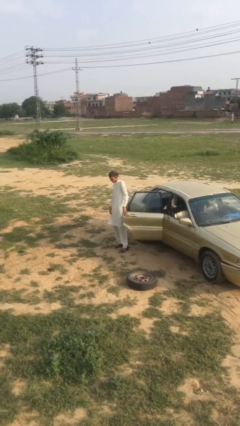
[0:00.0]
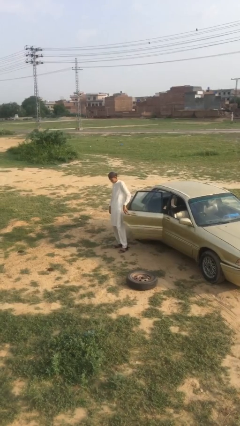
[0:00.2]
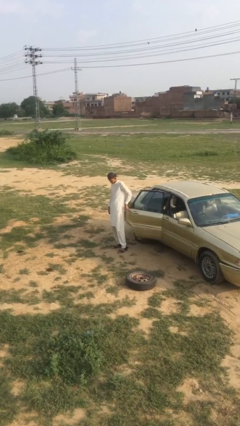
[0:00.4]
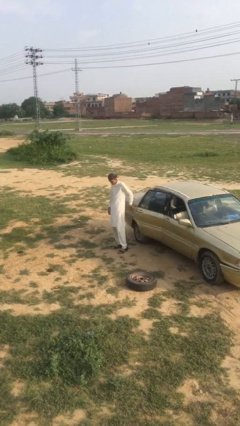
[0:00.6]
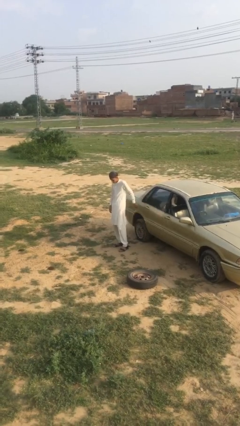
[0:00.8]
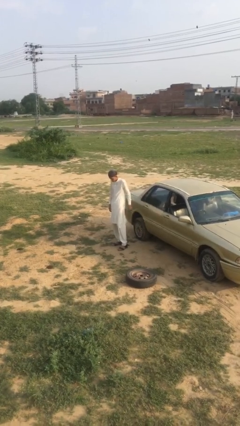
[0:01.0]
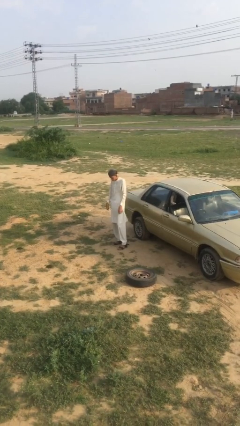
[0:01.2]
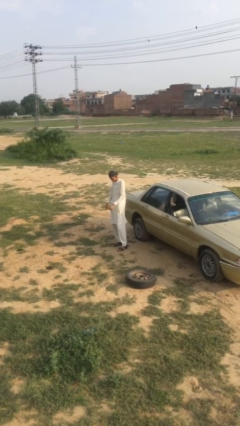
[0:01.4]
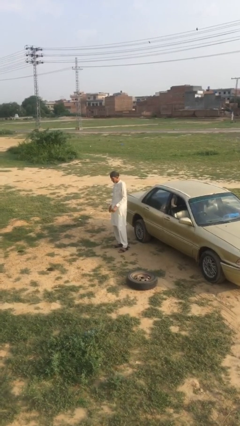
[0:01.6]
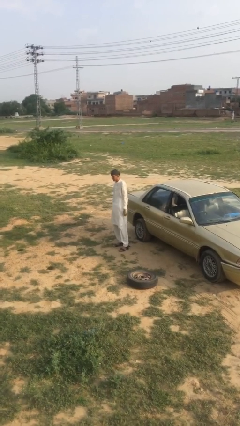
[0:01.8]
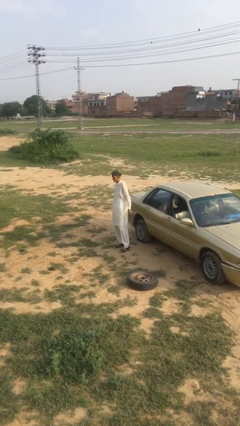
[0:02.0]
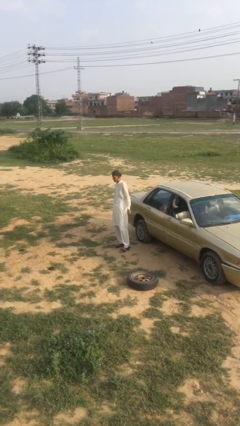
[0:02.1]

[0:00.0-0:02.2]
person closes car door

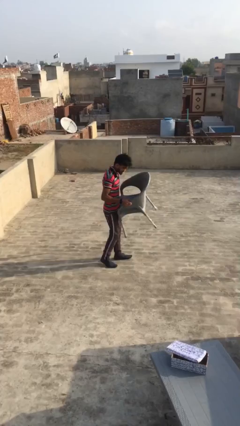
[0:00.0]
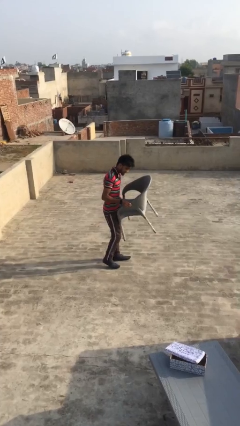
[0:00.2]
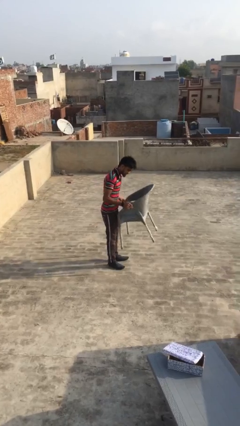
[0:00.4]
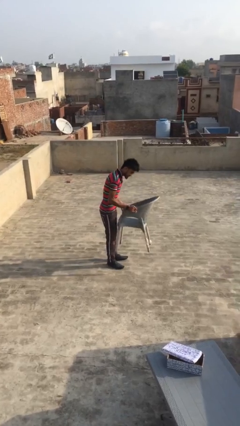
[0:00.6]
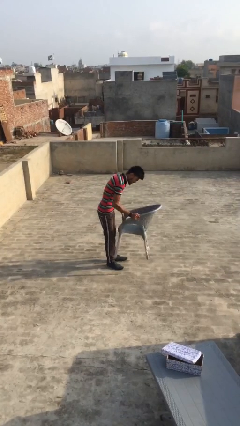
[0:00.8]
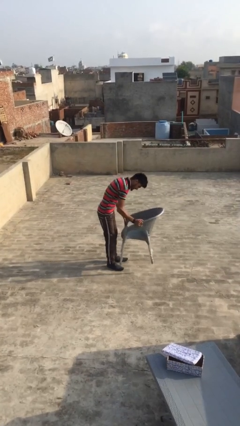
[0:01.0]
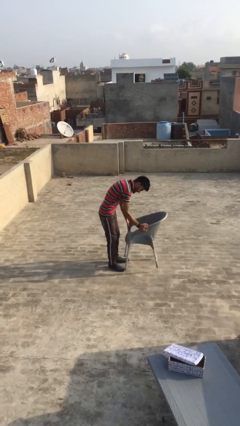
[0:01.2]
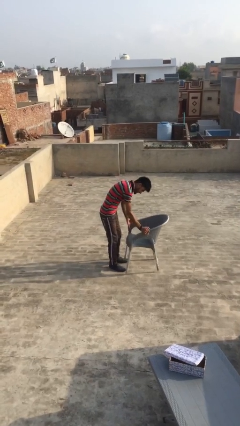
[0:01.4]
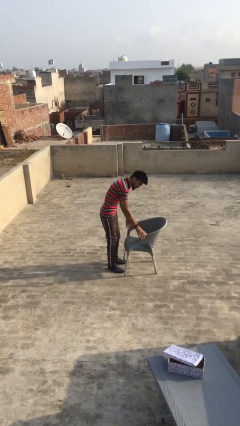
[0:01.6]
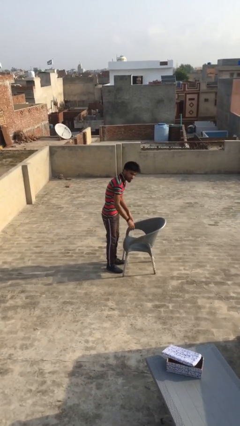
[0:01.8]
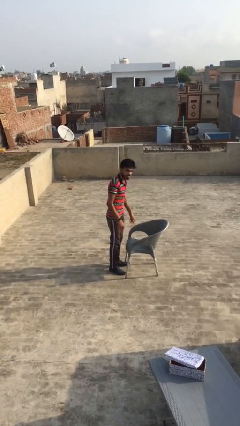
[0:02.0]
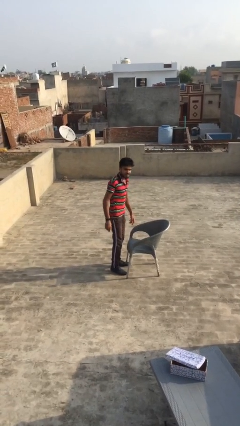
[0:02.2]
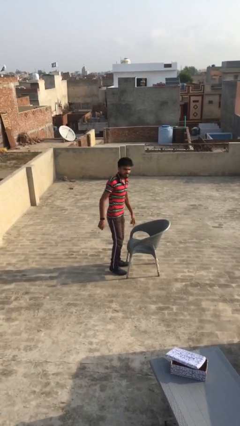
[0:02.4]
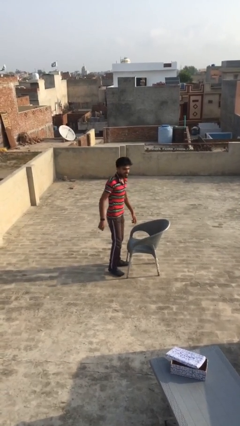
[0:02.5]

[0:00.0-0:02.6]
person puts down object on floor

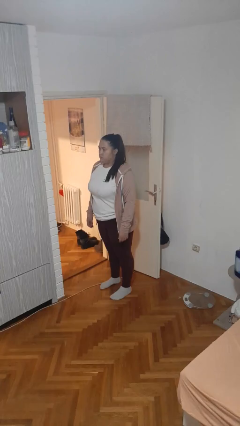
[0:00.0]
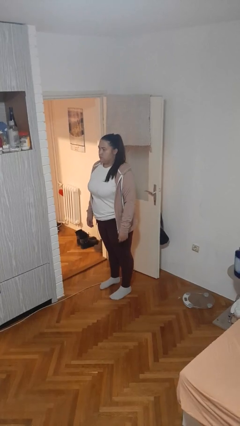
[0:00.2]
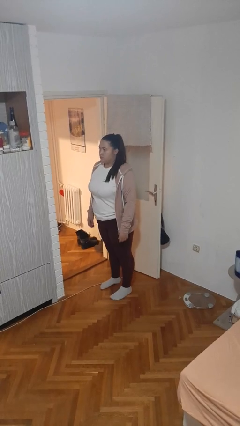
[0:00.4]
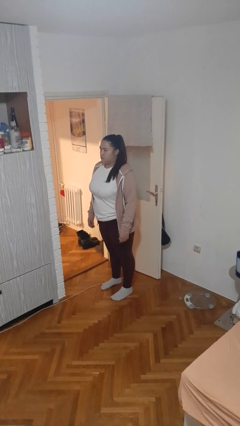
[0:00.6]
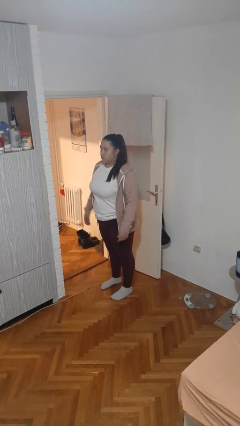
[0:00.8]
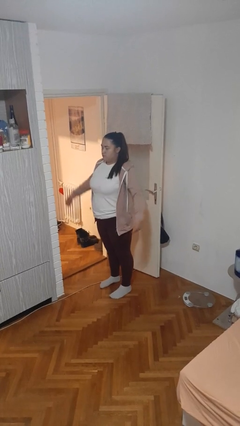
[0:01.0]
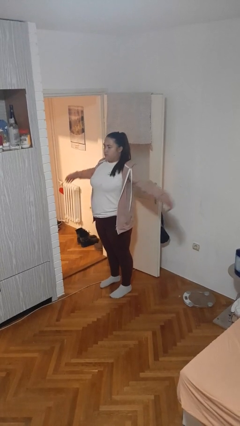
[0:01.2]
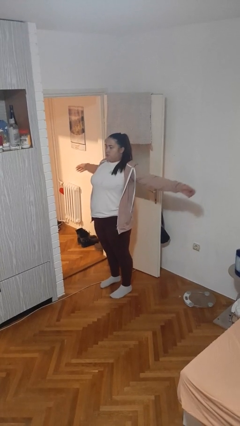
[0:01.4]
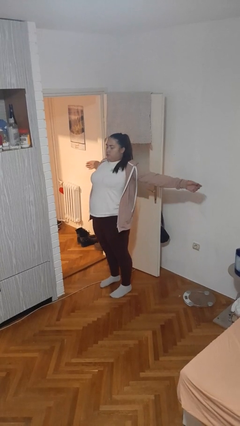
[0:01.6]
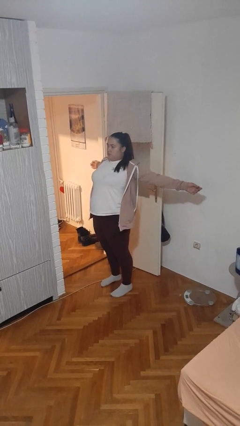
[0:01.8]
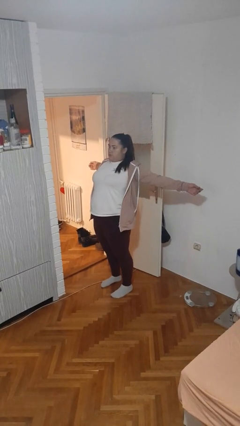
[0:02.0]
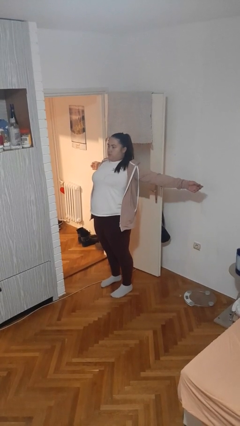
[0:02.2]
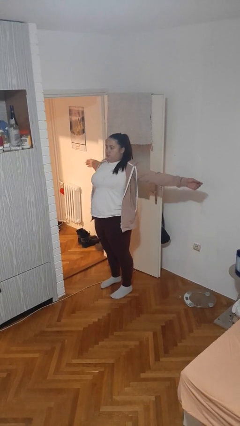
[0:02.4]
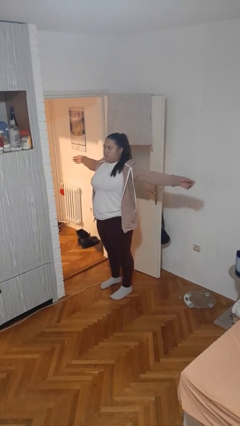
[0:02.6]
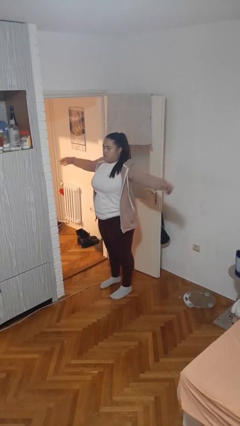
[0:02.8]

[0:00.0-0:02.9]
person stretches arms to side

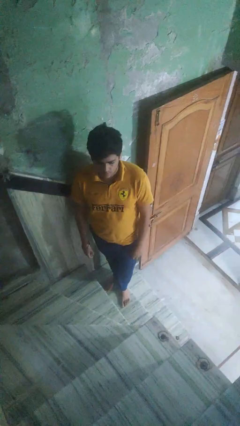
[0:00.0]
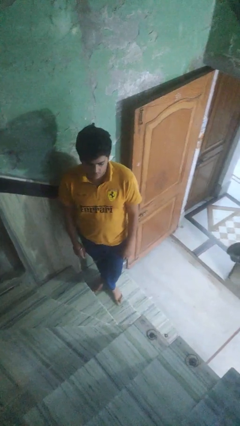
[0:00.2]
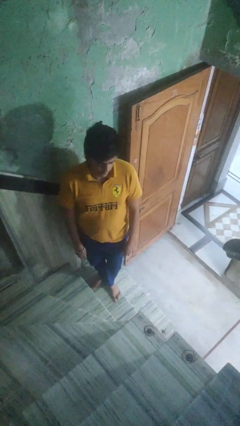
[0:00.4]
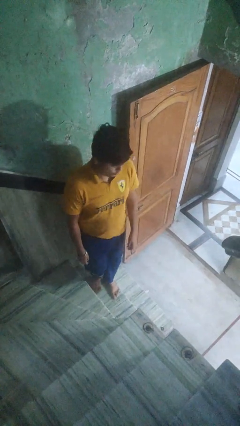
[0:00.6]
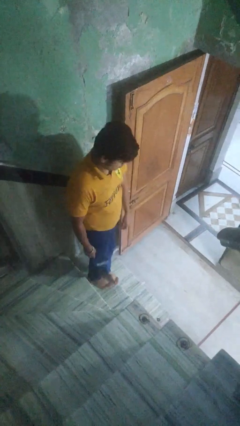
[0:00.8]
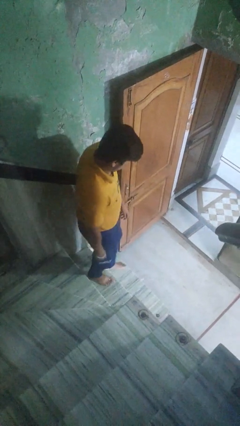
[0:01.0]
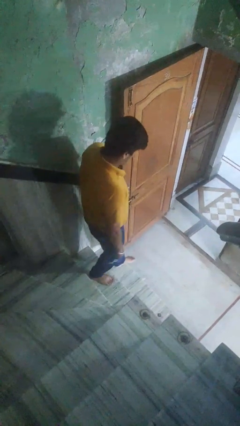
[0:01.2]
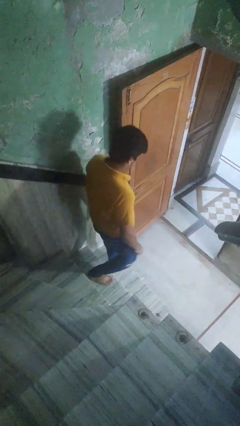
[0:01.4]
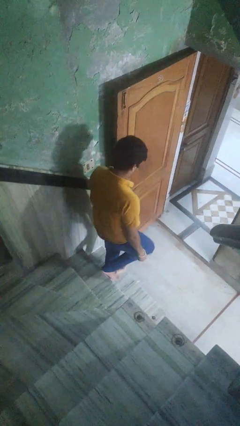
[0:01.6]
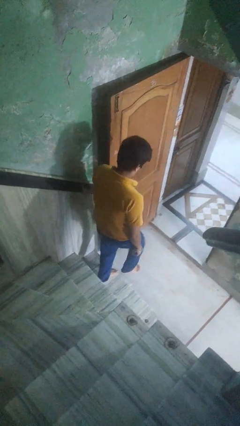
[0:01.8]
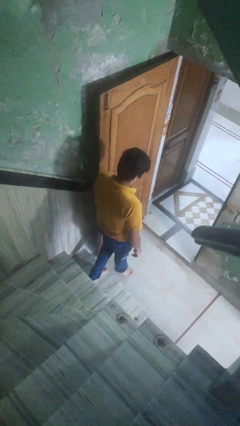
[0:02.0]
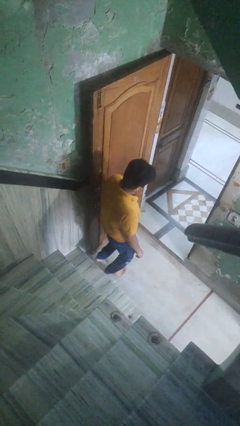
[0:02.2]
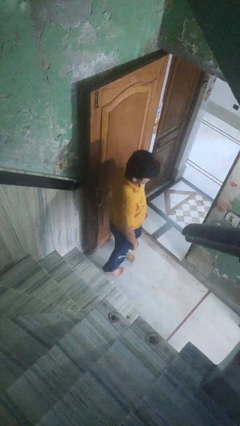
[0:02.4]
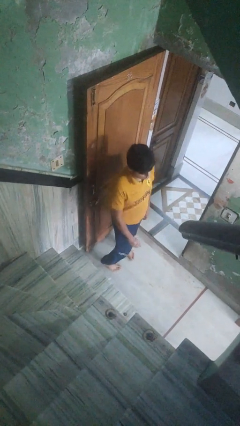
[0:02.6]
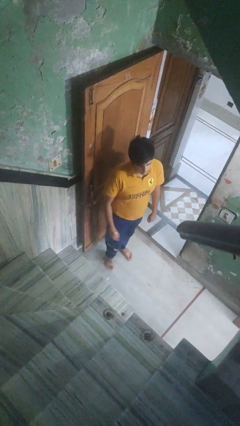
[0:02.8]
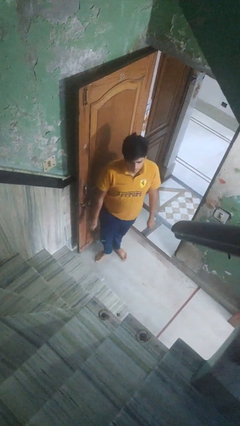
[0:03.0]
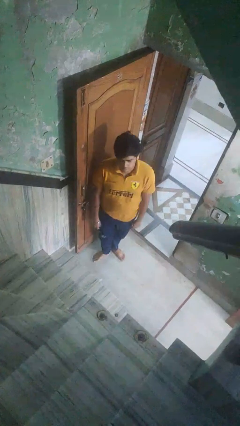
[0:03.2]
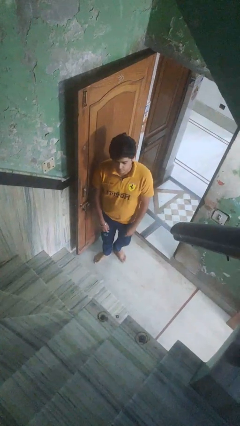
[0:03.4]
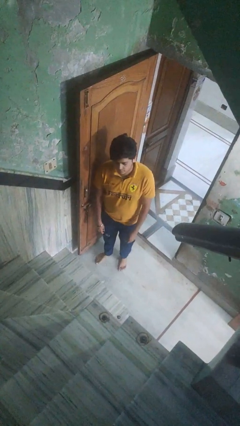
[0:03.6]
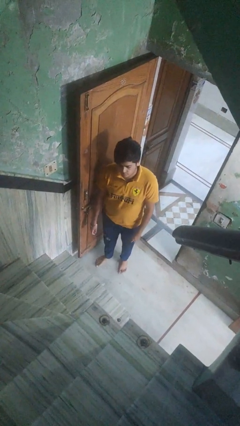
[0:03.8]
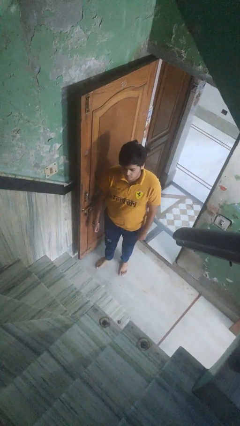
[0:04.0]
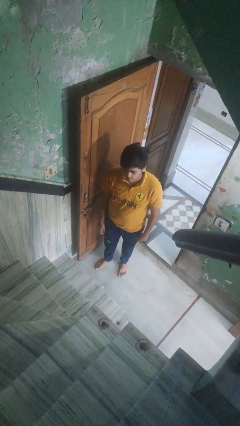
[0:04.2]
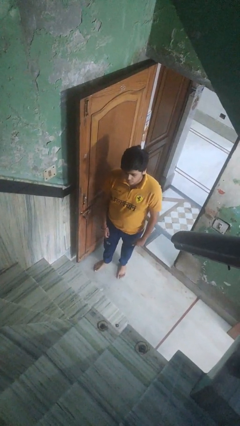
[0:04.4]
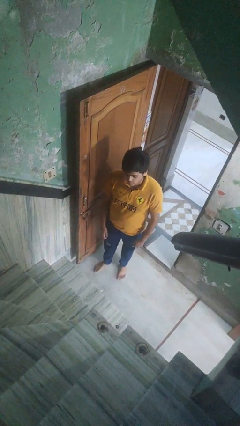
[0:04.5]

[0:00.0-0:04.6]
person climbs down stairs

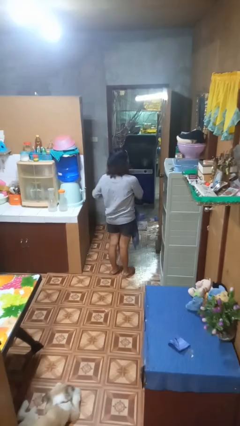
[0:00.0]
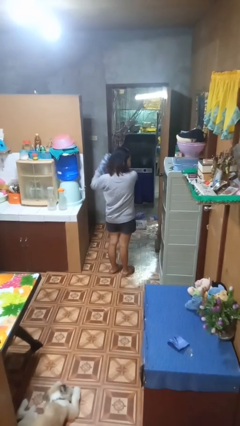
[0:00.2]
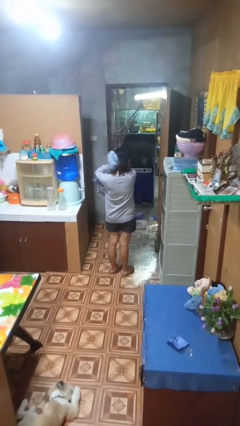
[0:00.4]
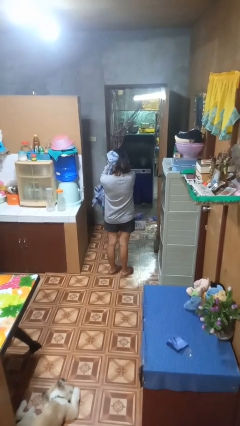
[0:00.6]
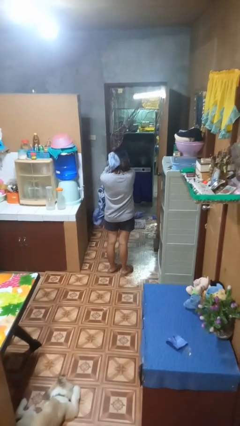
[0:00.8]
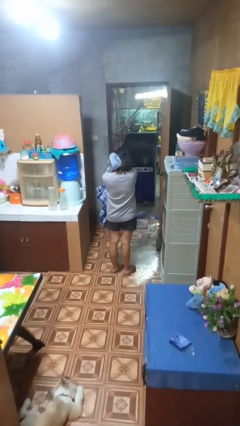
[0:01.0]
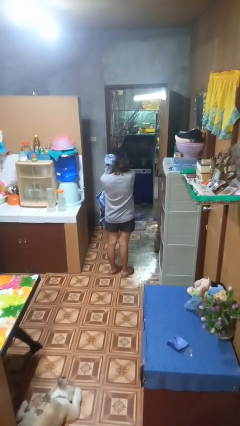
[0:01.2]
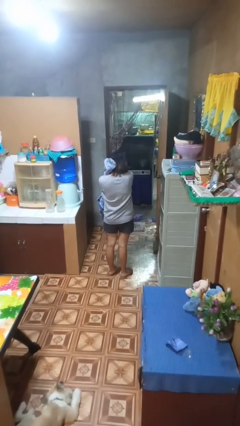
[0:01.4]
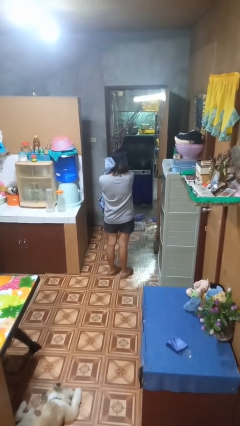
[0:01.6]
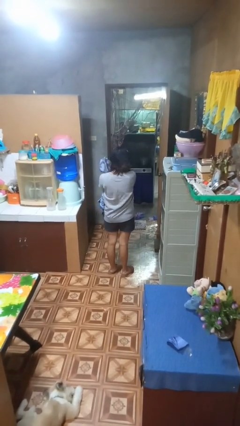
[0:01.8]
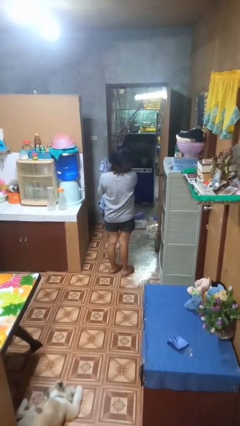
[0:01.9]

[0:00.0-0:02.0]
person dries hair with towel

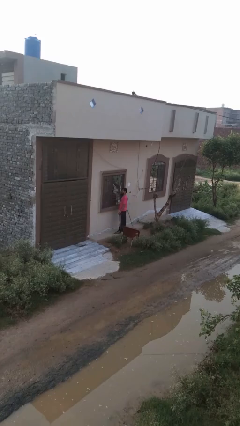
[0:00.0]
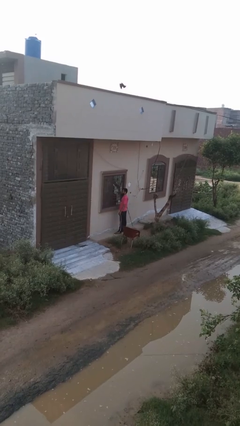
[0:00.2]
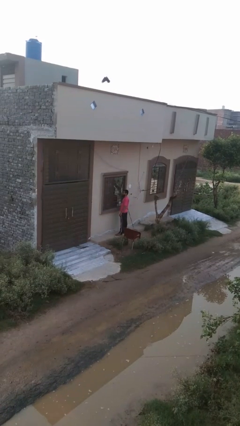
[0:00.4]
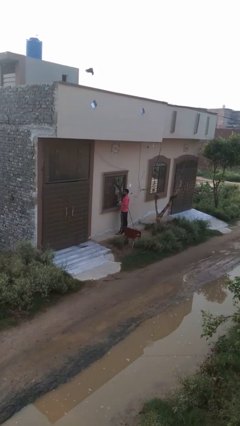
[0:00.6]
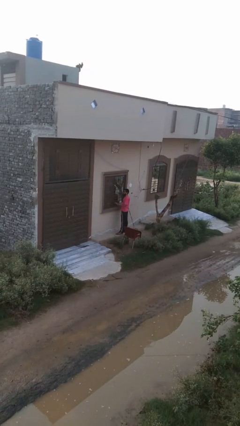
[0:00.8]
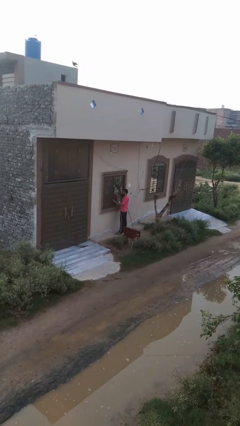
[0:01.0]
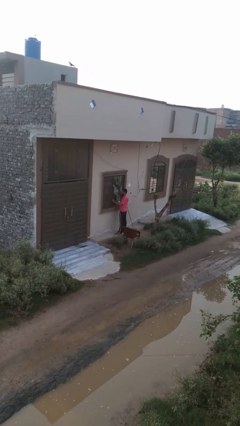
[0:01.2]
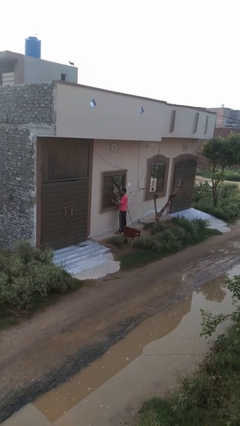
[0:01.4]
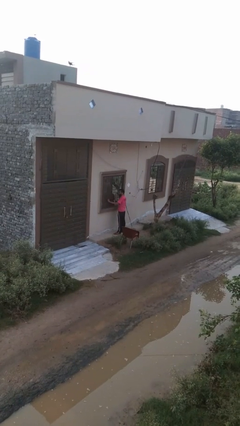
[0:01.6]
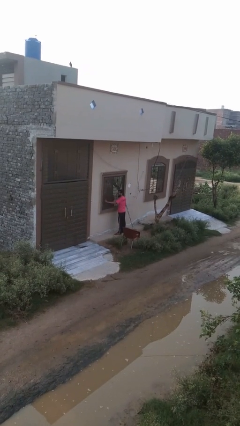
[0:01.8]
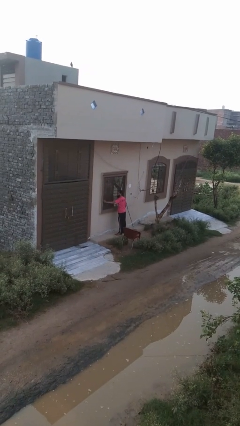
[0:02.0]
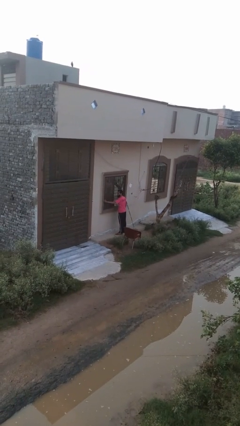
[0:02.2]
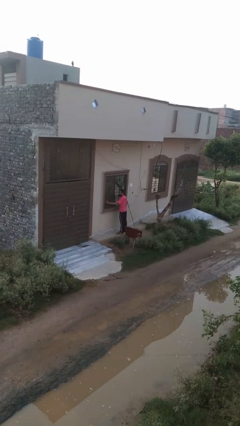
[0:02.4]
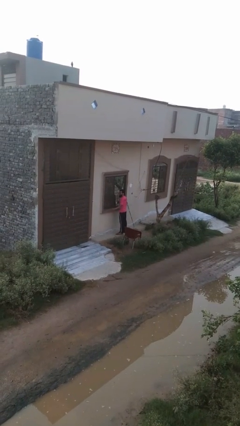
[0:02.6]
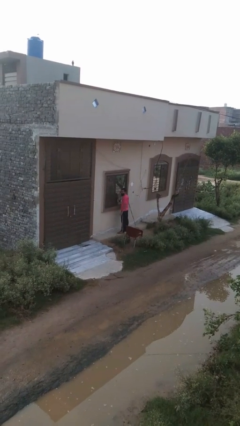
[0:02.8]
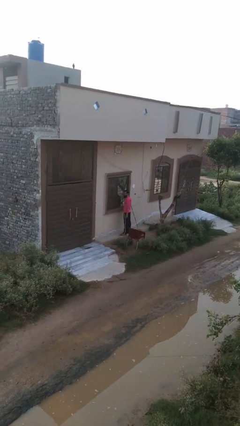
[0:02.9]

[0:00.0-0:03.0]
person opens home window
